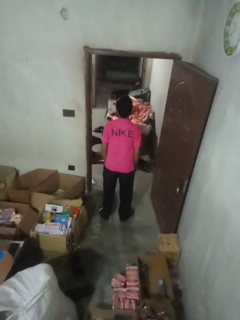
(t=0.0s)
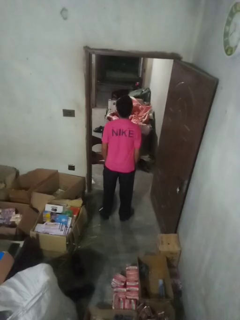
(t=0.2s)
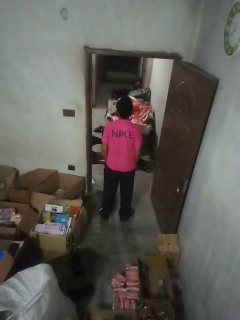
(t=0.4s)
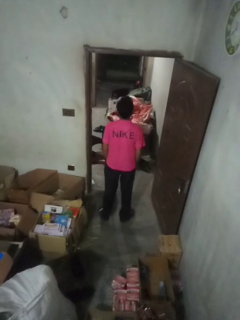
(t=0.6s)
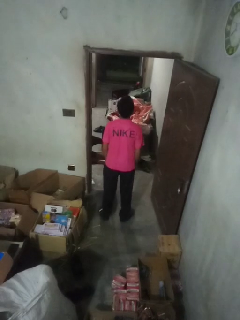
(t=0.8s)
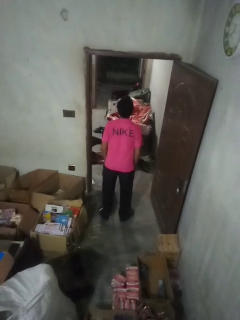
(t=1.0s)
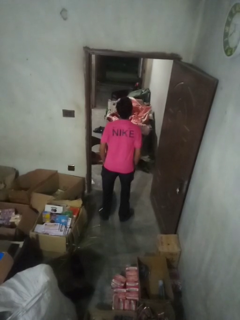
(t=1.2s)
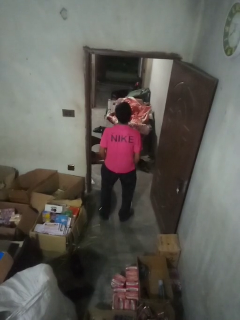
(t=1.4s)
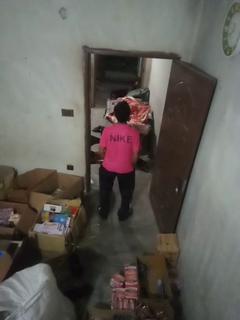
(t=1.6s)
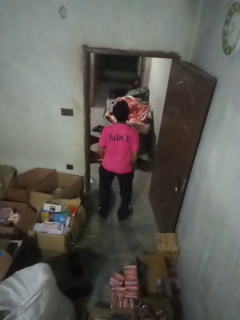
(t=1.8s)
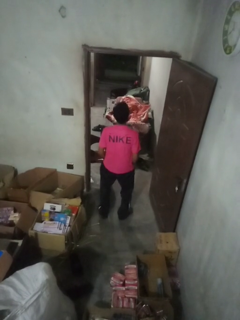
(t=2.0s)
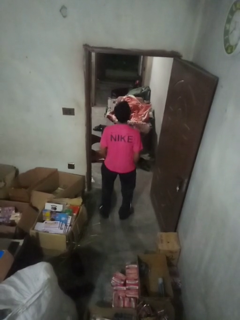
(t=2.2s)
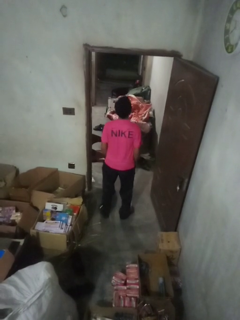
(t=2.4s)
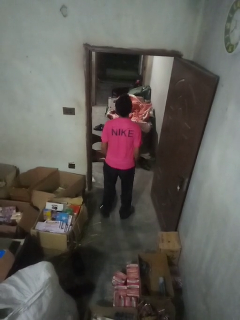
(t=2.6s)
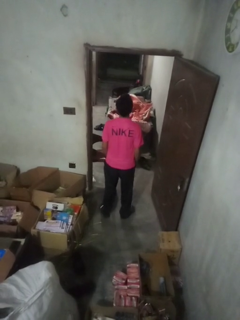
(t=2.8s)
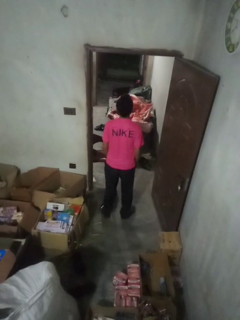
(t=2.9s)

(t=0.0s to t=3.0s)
person wiggles hips

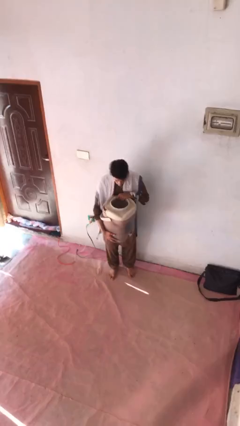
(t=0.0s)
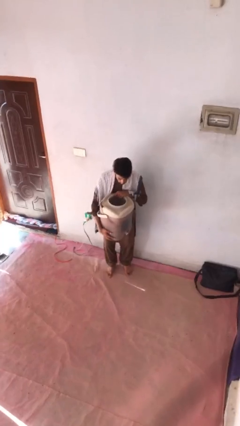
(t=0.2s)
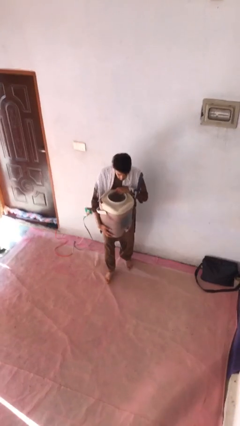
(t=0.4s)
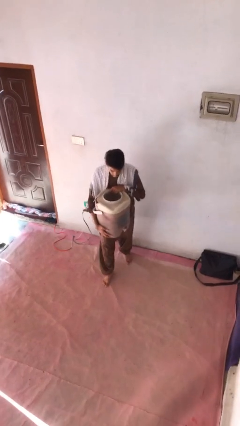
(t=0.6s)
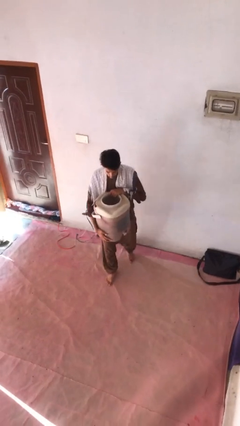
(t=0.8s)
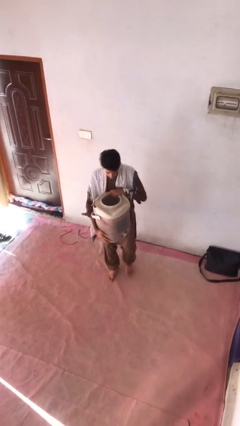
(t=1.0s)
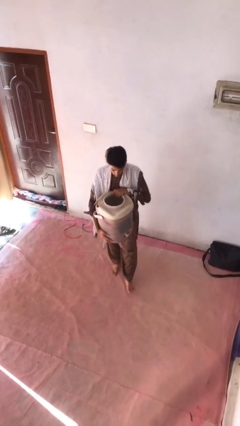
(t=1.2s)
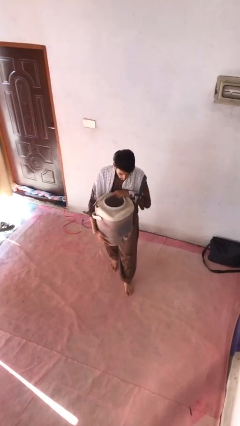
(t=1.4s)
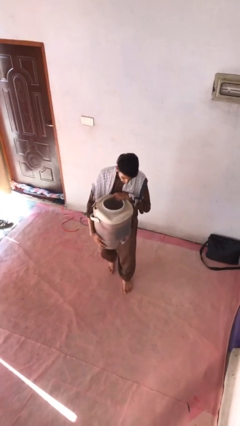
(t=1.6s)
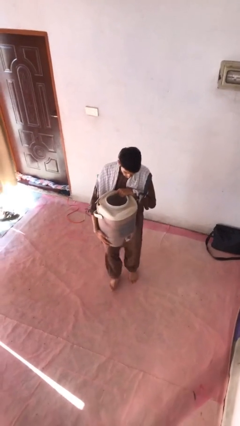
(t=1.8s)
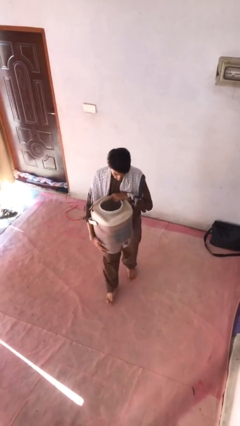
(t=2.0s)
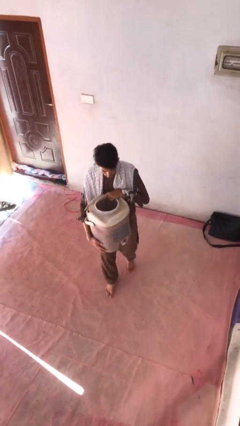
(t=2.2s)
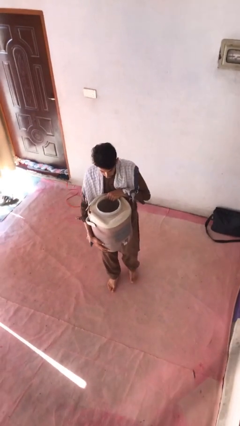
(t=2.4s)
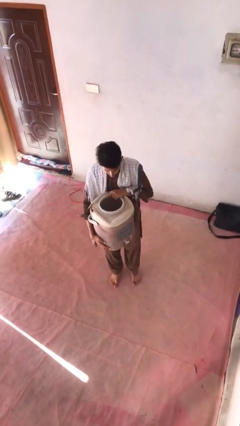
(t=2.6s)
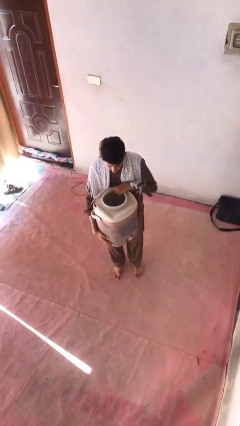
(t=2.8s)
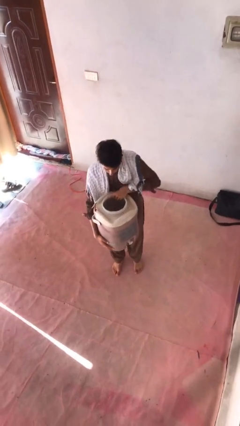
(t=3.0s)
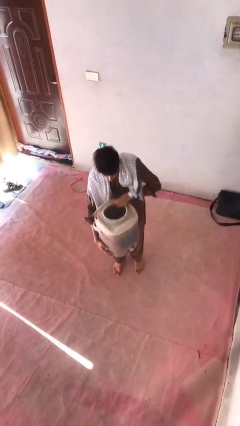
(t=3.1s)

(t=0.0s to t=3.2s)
person carries heavy object

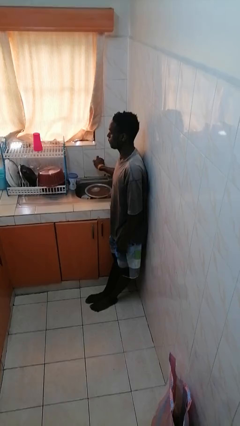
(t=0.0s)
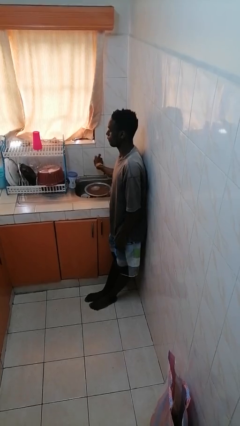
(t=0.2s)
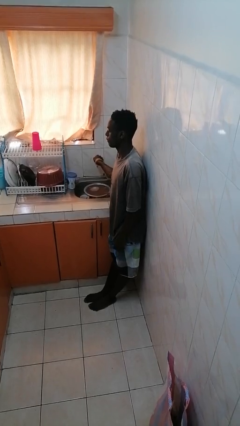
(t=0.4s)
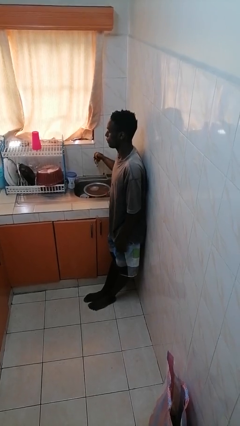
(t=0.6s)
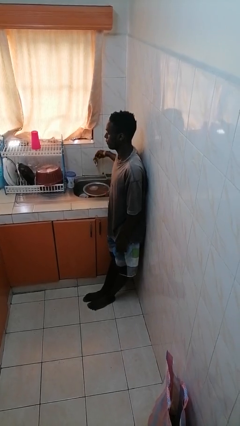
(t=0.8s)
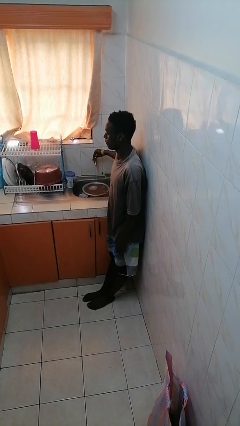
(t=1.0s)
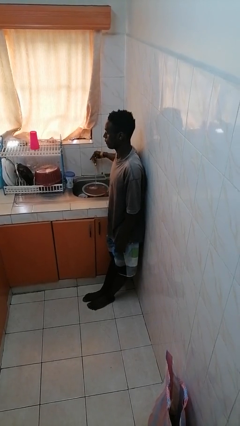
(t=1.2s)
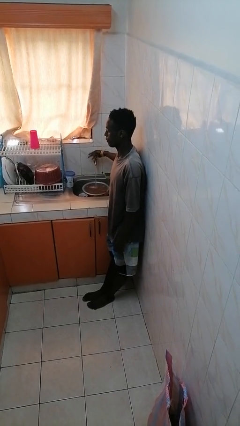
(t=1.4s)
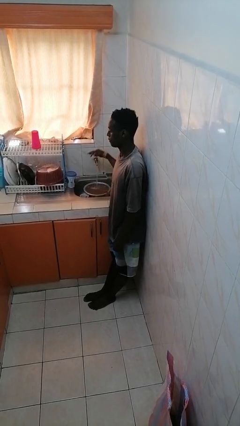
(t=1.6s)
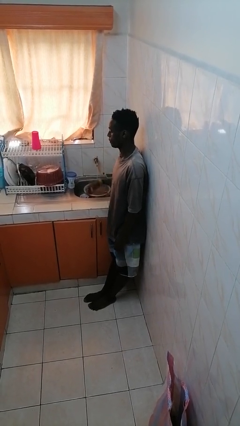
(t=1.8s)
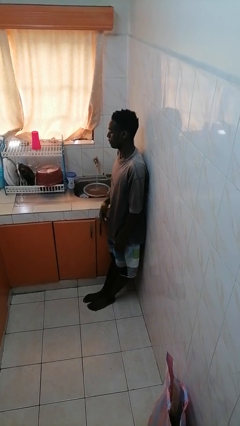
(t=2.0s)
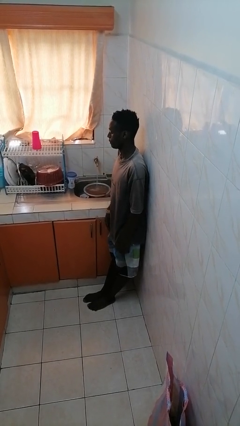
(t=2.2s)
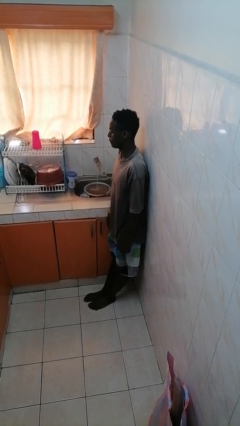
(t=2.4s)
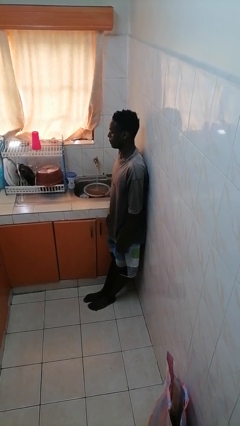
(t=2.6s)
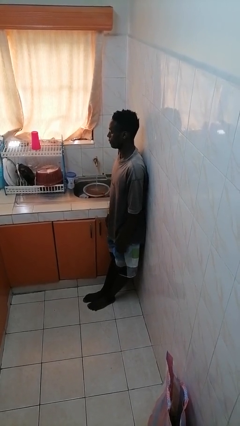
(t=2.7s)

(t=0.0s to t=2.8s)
person turns on faucet

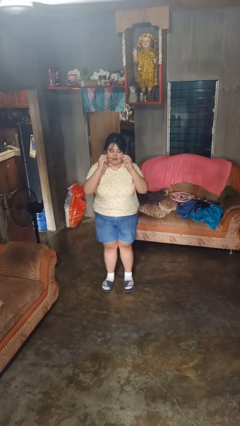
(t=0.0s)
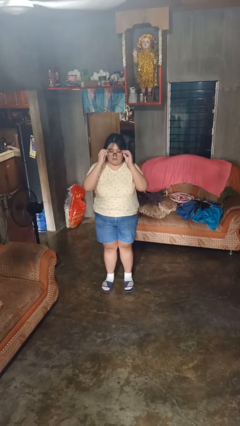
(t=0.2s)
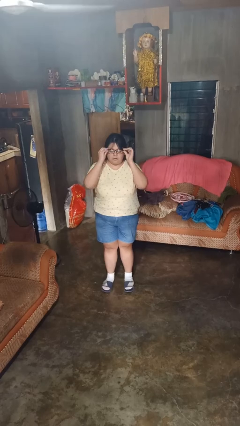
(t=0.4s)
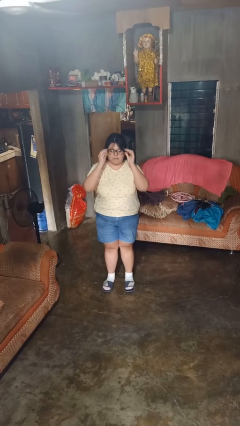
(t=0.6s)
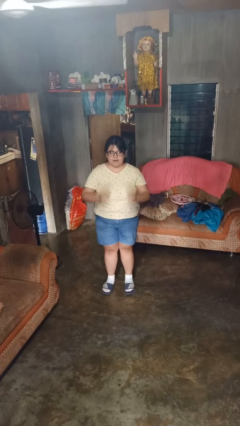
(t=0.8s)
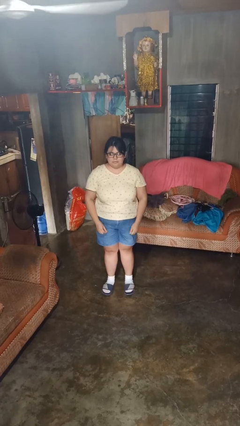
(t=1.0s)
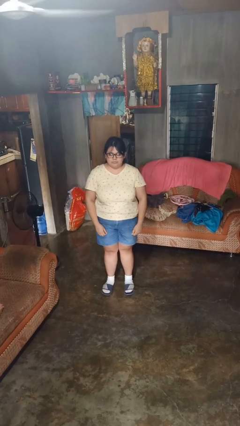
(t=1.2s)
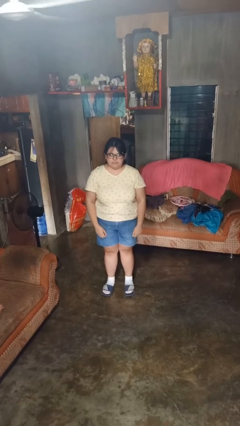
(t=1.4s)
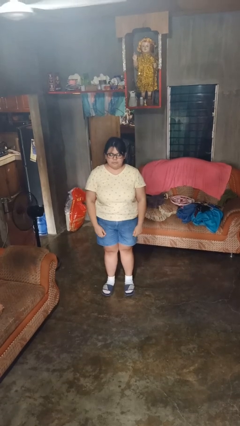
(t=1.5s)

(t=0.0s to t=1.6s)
person puts on glasses

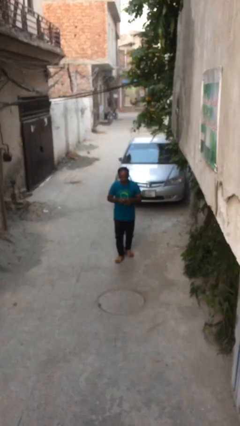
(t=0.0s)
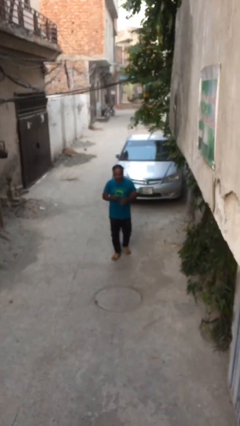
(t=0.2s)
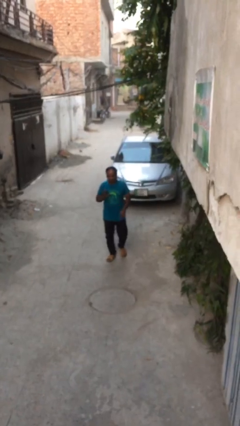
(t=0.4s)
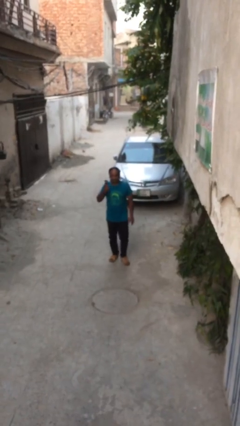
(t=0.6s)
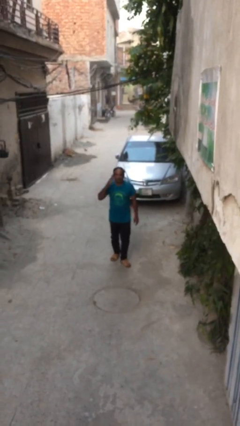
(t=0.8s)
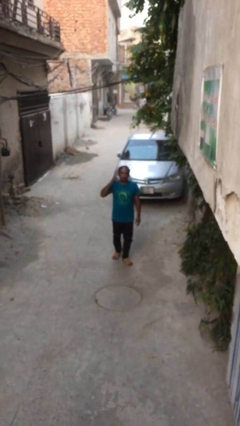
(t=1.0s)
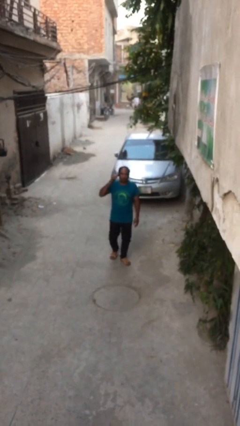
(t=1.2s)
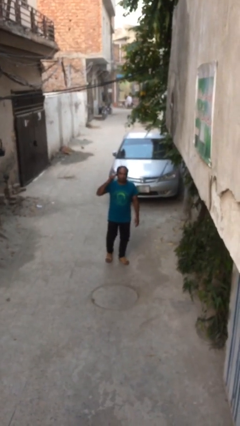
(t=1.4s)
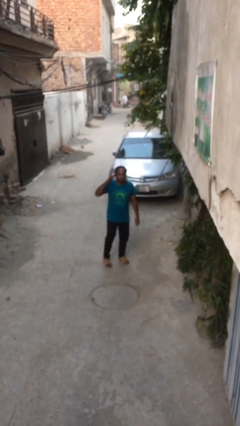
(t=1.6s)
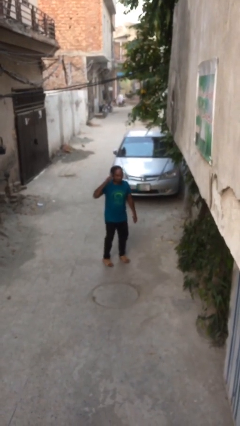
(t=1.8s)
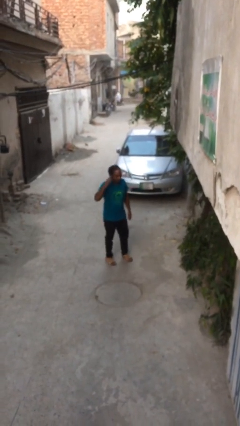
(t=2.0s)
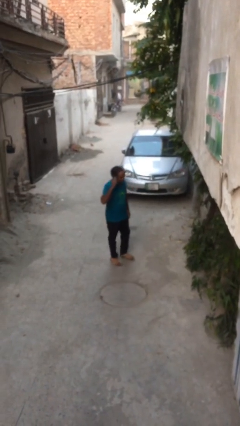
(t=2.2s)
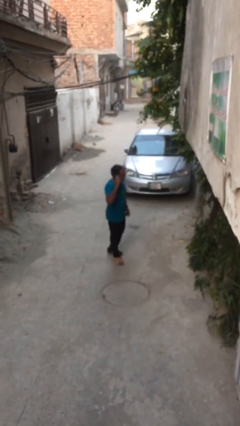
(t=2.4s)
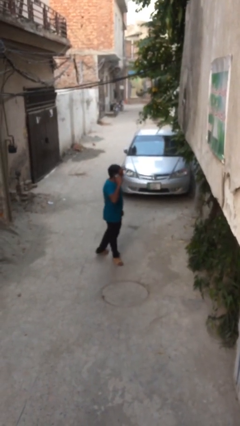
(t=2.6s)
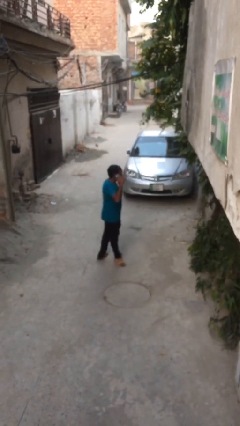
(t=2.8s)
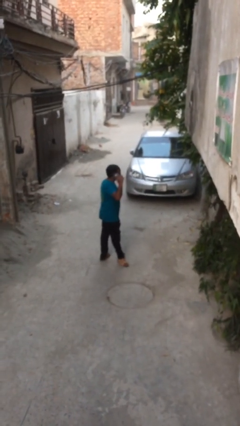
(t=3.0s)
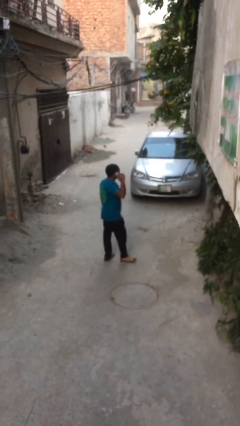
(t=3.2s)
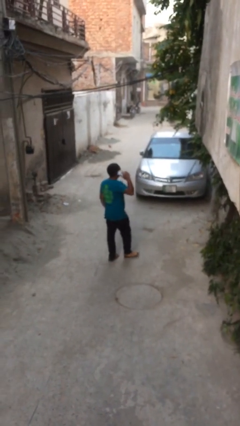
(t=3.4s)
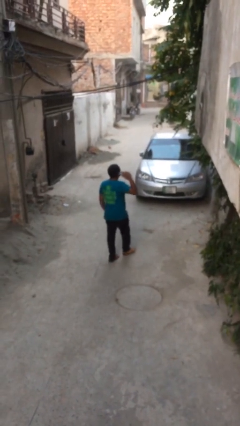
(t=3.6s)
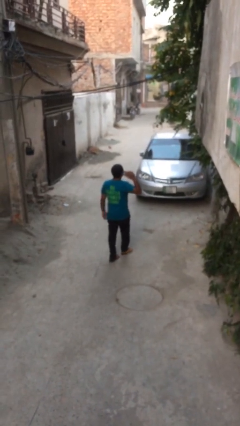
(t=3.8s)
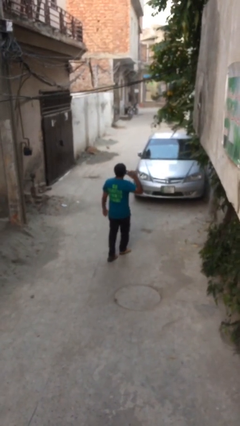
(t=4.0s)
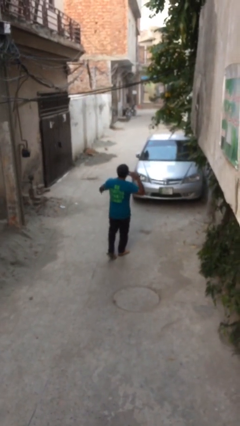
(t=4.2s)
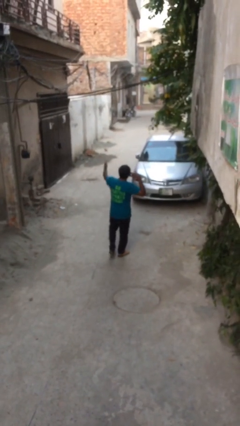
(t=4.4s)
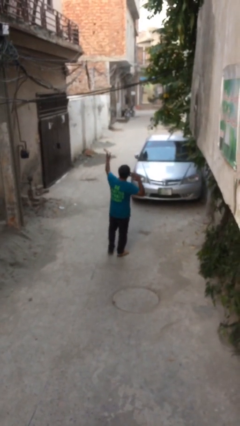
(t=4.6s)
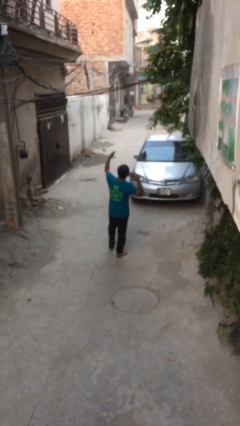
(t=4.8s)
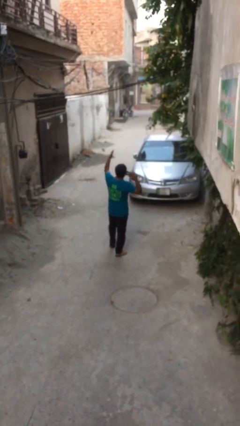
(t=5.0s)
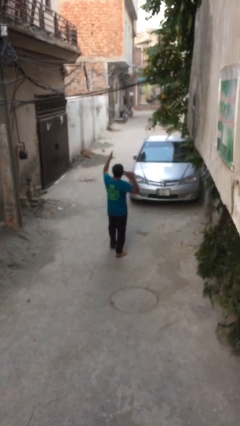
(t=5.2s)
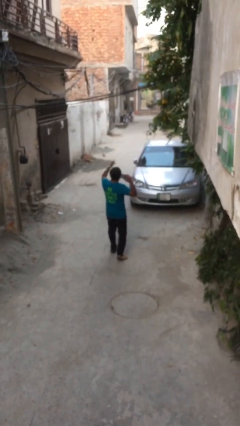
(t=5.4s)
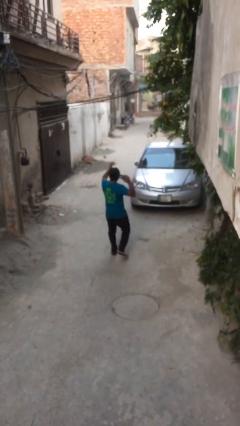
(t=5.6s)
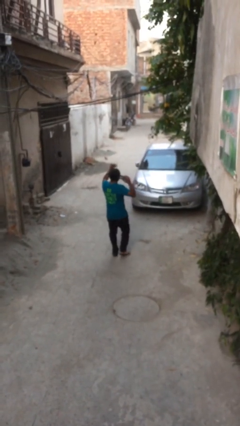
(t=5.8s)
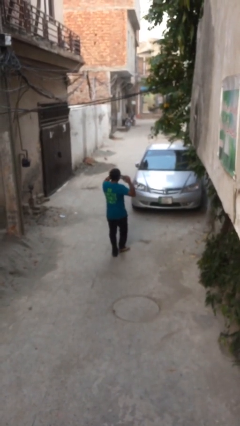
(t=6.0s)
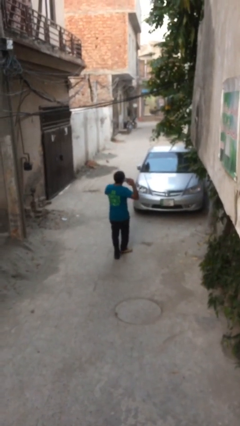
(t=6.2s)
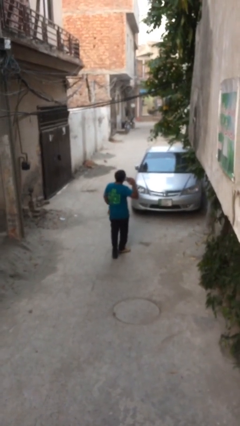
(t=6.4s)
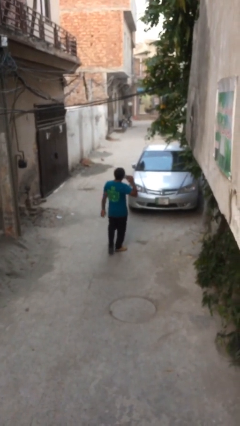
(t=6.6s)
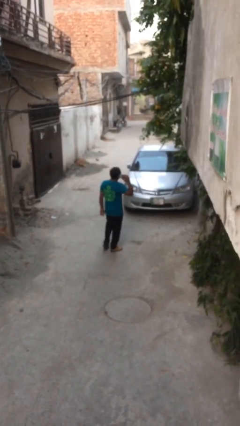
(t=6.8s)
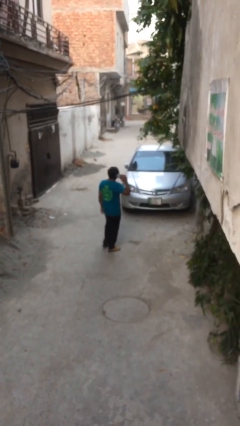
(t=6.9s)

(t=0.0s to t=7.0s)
person talks on phone

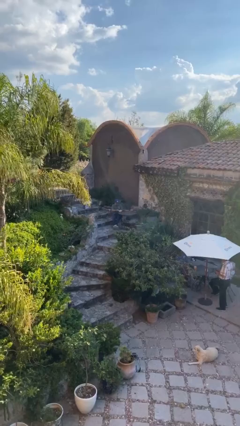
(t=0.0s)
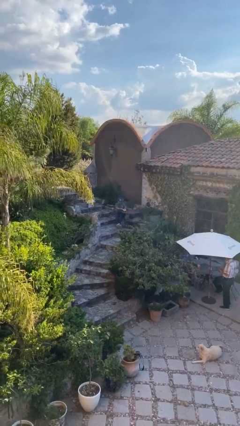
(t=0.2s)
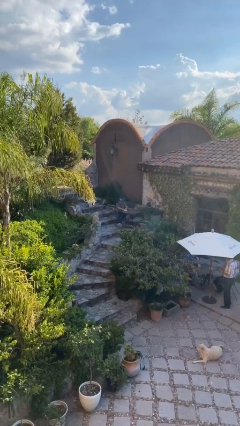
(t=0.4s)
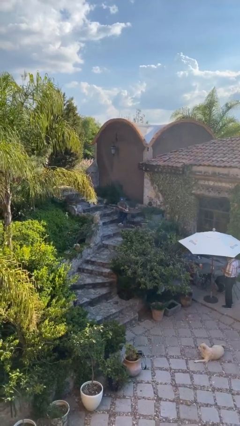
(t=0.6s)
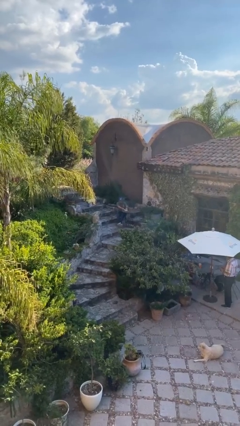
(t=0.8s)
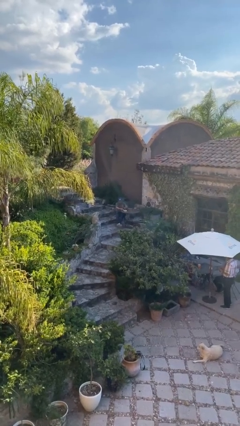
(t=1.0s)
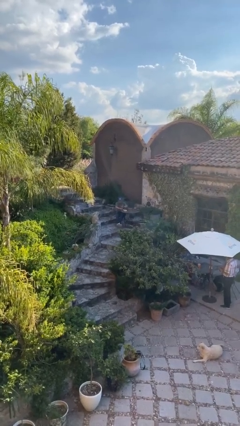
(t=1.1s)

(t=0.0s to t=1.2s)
person puts down object on table
